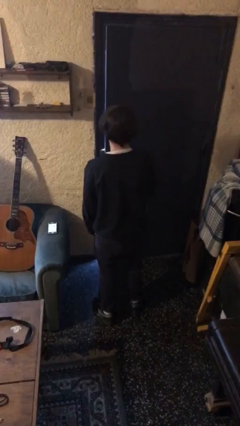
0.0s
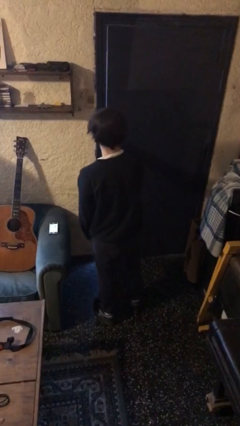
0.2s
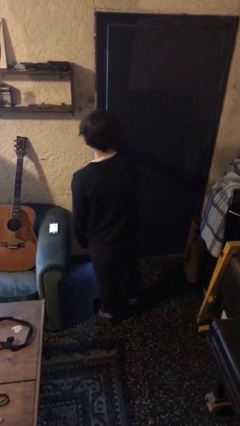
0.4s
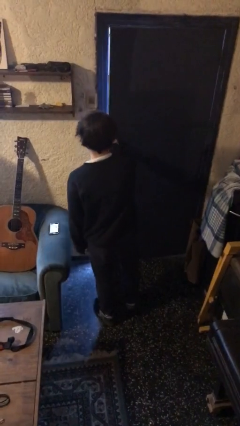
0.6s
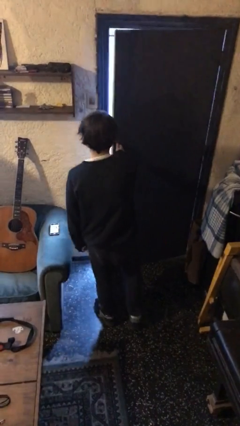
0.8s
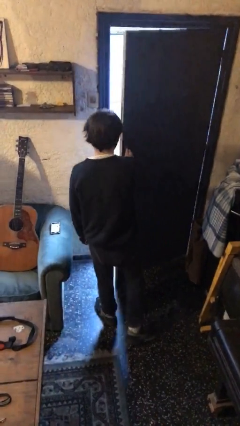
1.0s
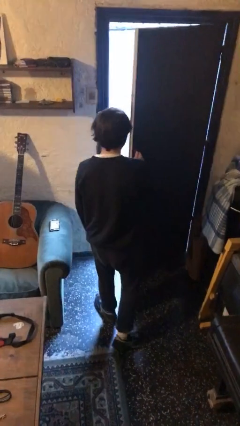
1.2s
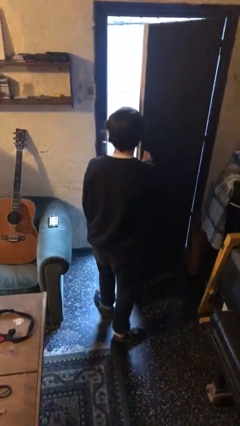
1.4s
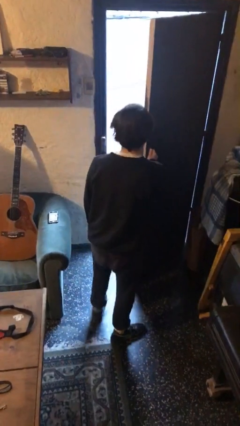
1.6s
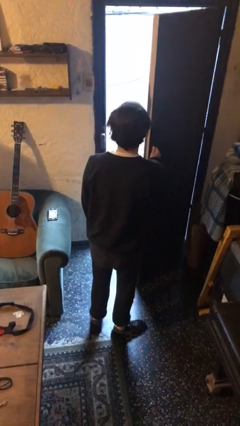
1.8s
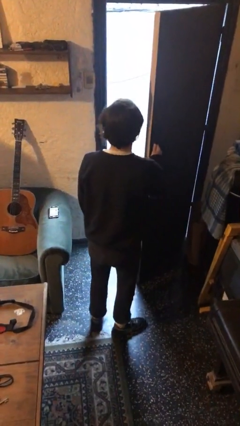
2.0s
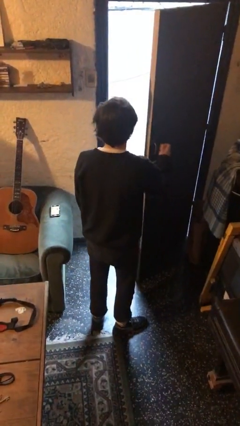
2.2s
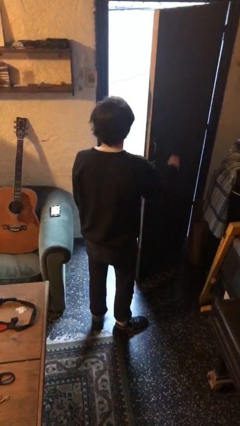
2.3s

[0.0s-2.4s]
person opens facility door

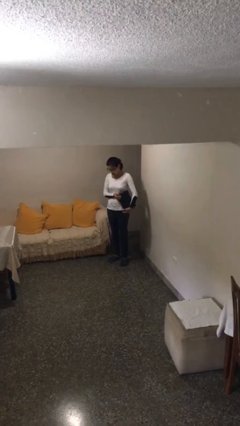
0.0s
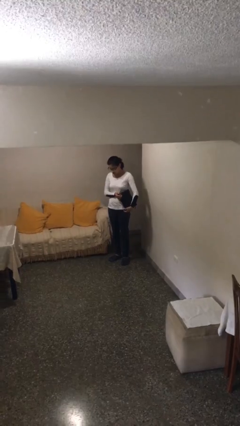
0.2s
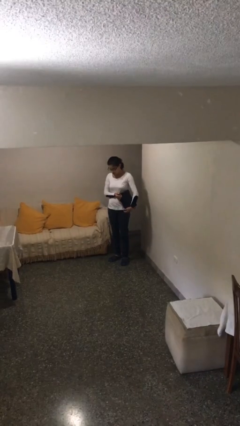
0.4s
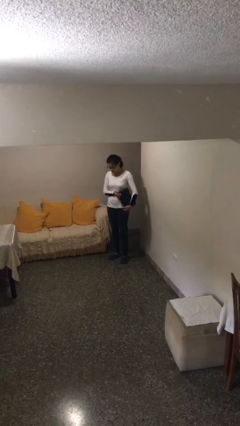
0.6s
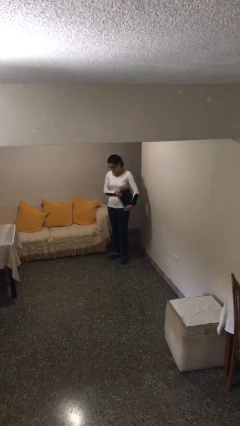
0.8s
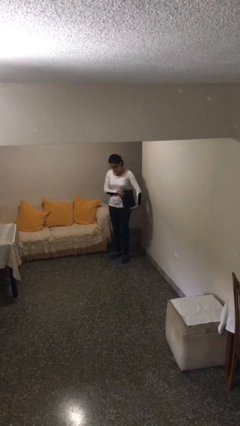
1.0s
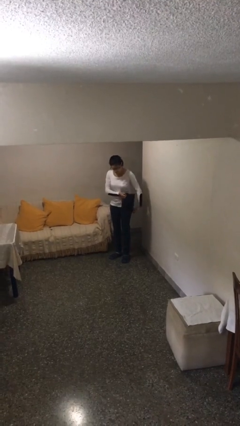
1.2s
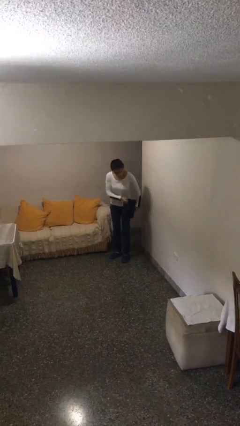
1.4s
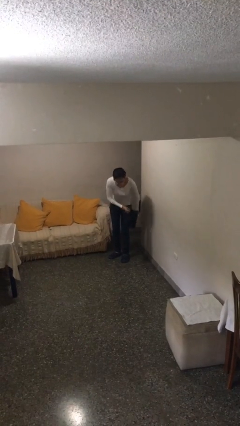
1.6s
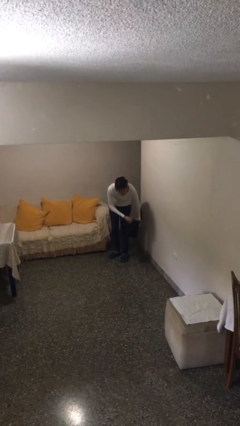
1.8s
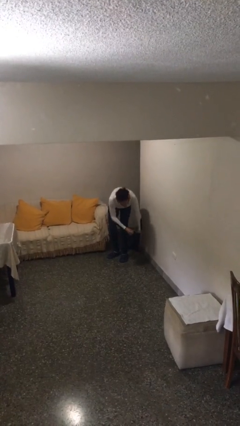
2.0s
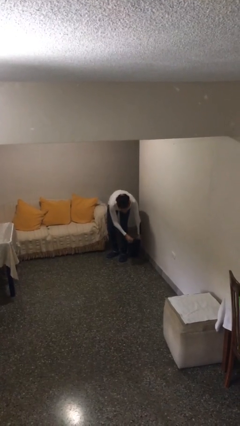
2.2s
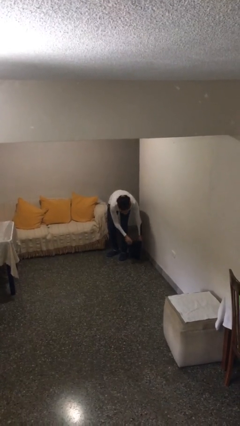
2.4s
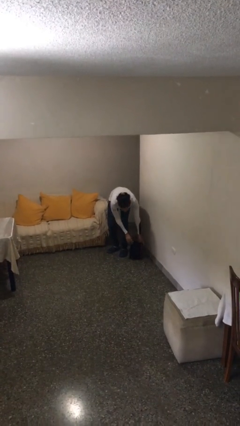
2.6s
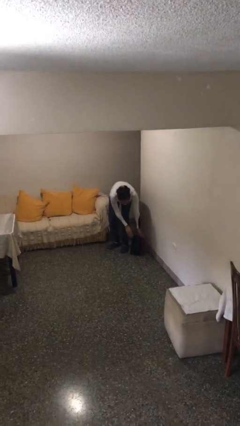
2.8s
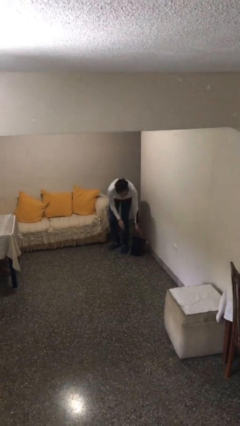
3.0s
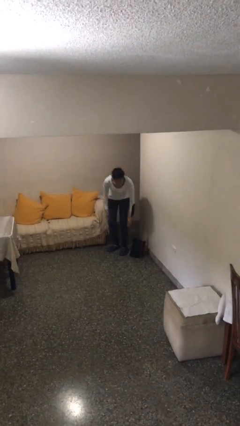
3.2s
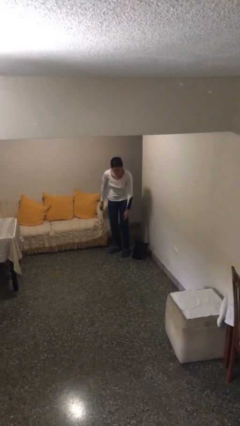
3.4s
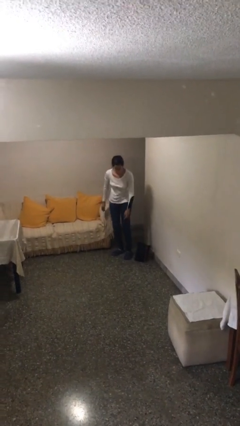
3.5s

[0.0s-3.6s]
person puts down object on floor

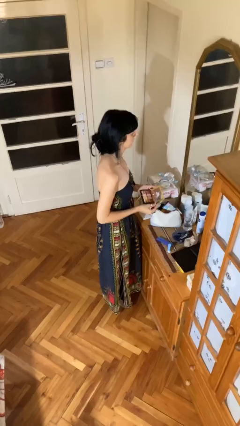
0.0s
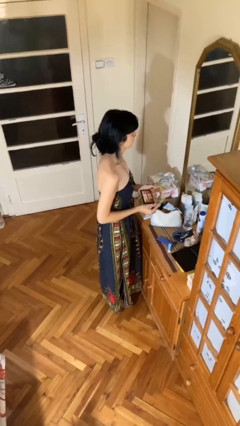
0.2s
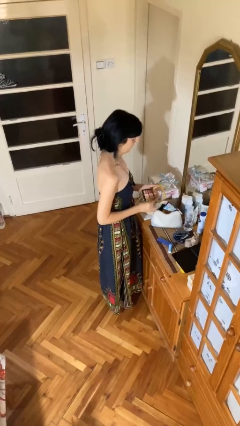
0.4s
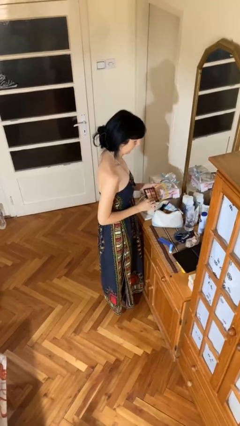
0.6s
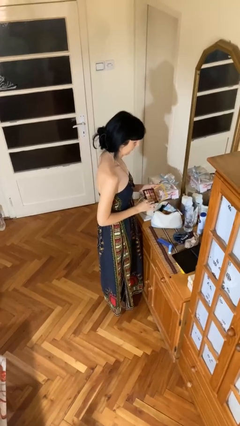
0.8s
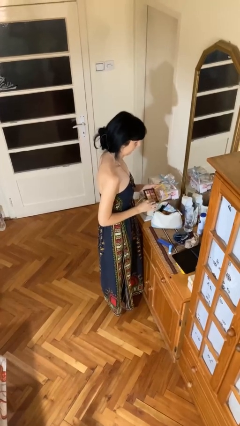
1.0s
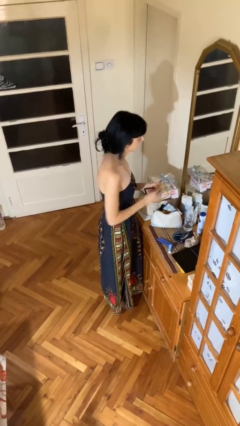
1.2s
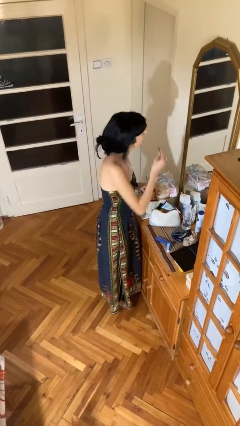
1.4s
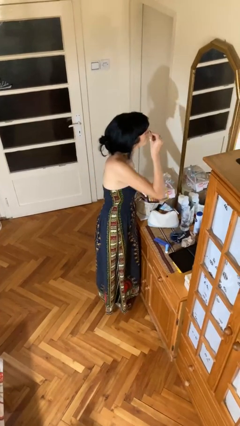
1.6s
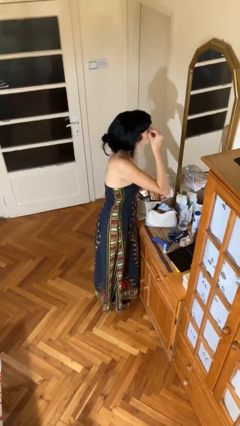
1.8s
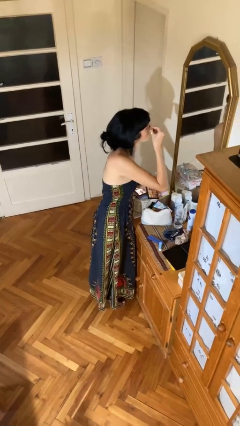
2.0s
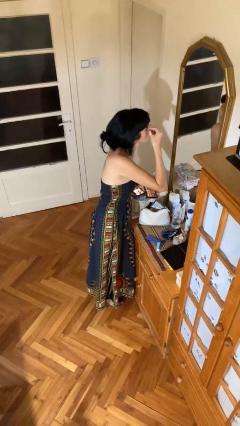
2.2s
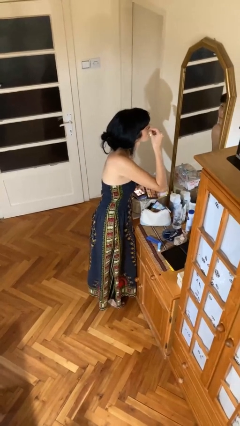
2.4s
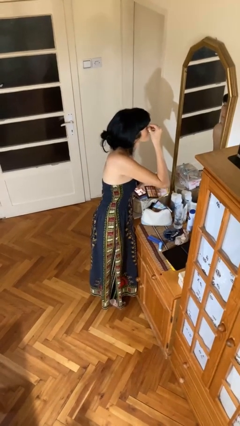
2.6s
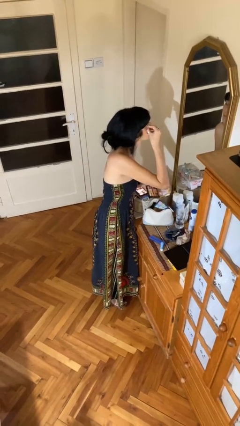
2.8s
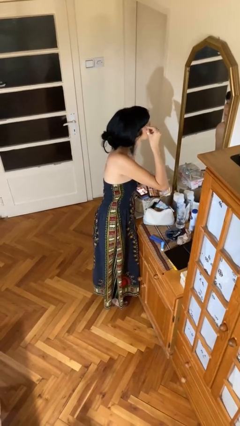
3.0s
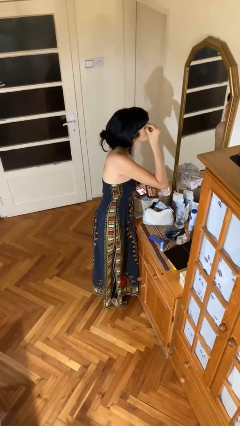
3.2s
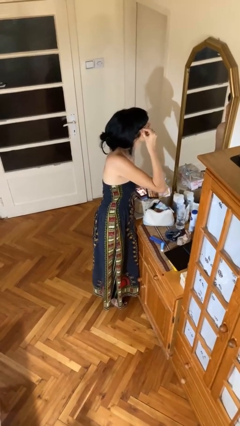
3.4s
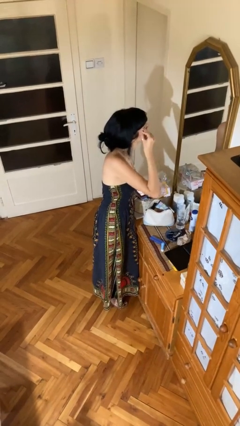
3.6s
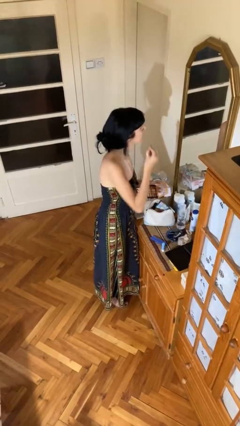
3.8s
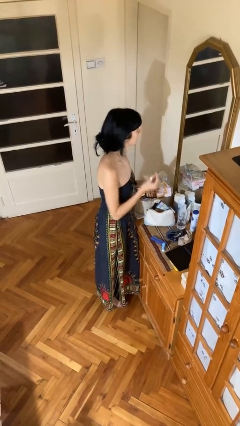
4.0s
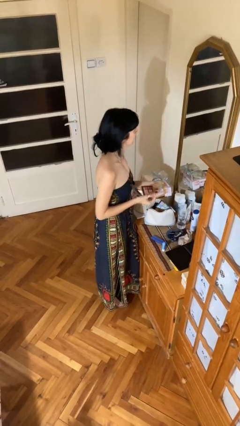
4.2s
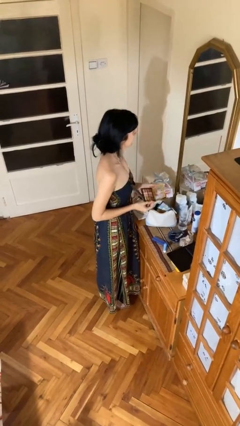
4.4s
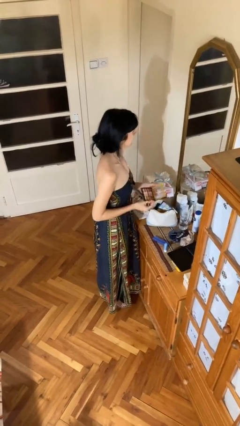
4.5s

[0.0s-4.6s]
person applies eye makeup

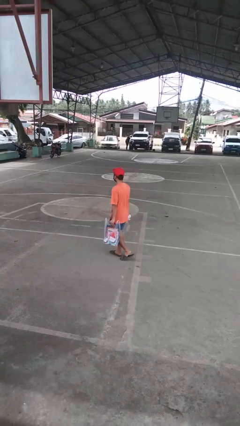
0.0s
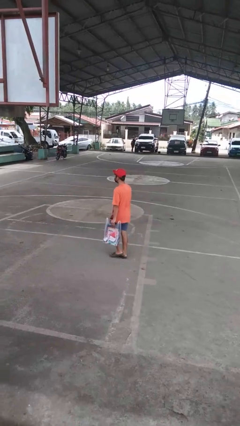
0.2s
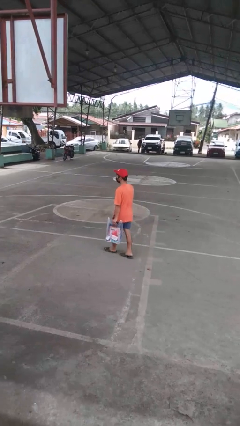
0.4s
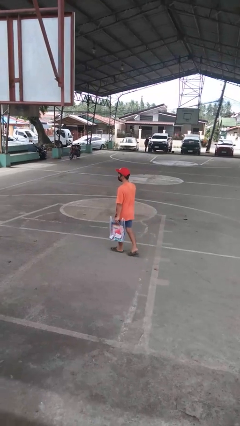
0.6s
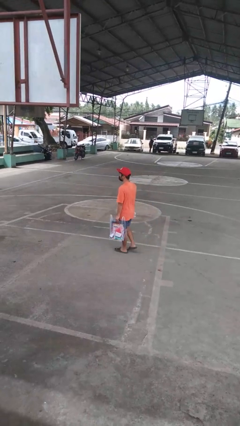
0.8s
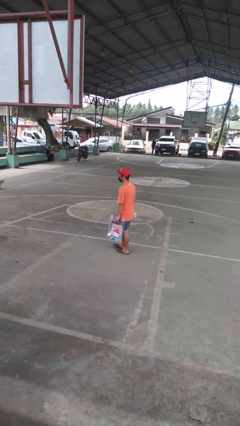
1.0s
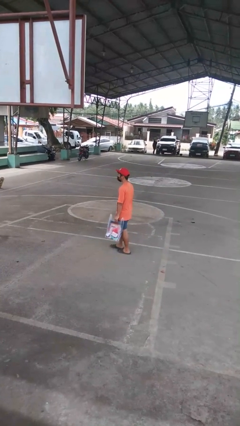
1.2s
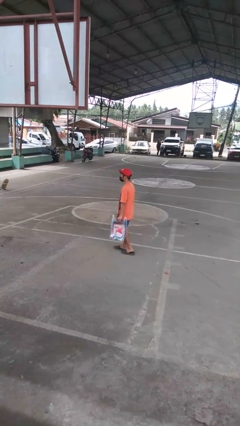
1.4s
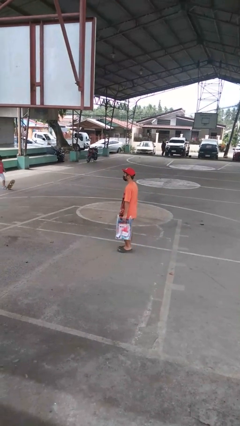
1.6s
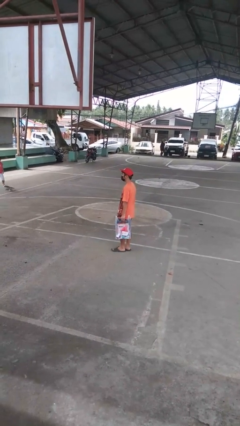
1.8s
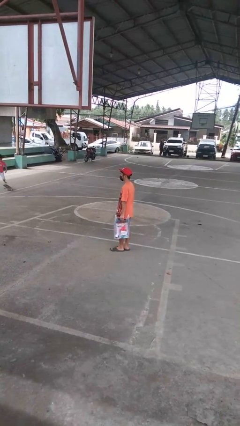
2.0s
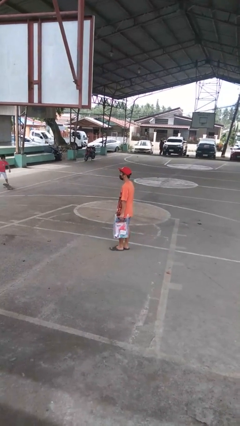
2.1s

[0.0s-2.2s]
person carries groceries

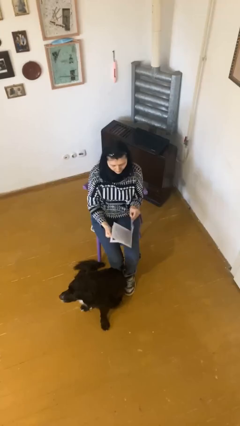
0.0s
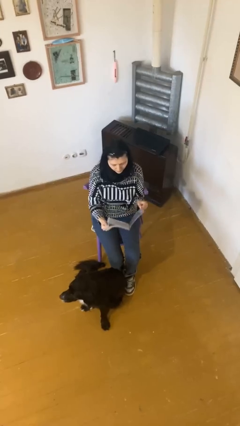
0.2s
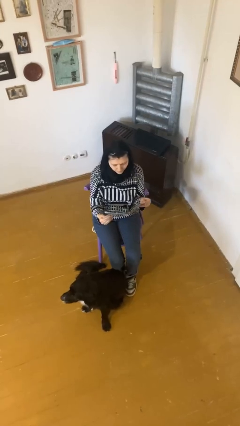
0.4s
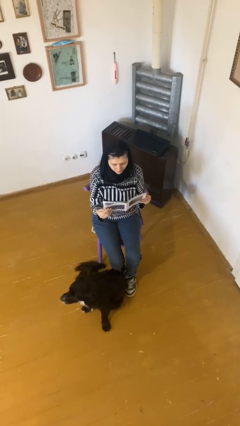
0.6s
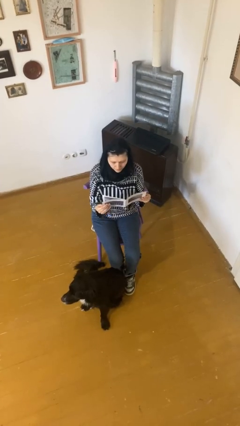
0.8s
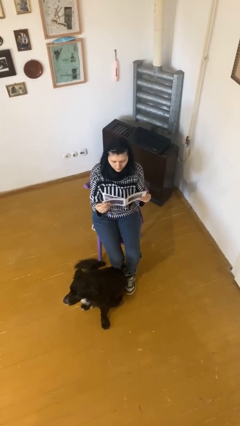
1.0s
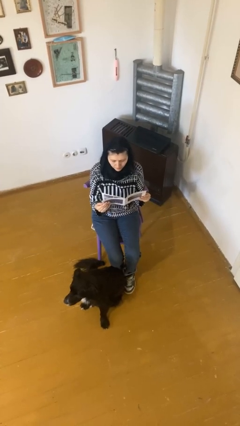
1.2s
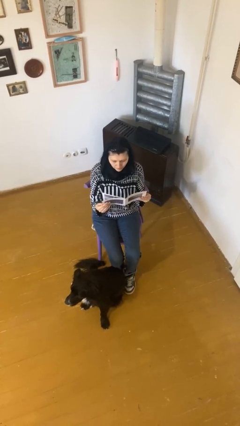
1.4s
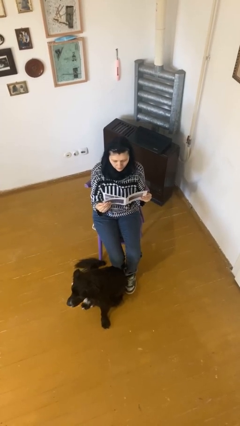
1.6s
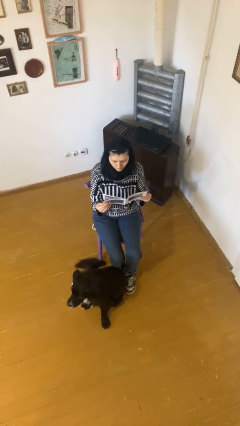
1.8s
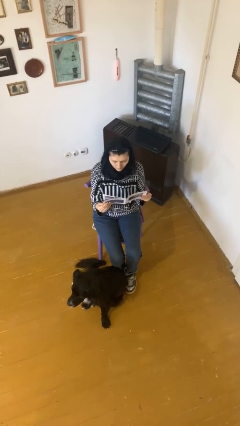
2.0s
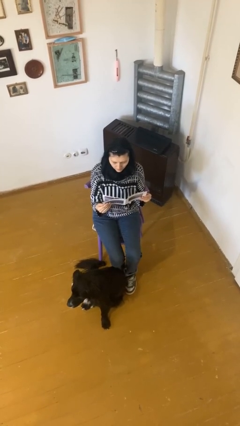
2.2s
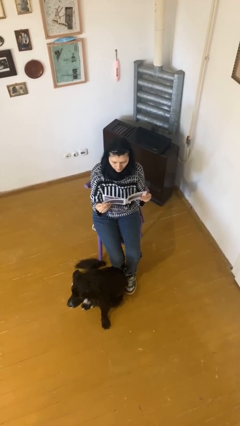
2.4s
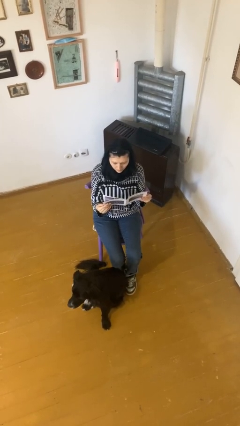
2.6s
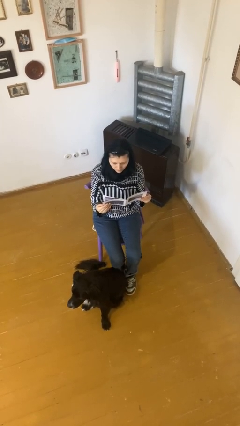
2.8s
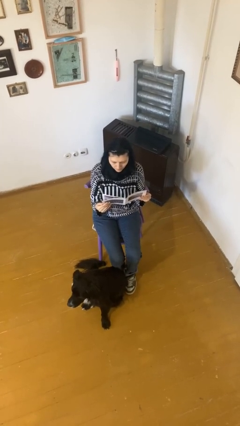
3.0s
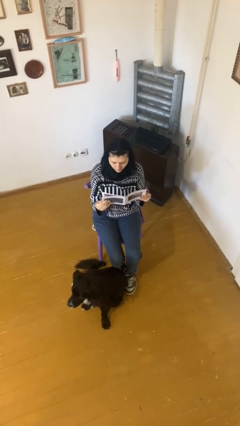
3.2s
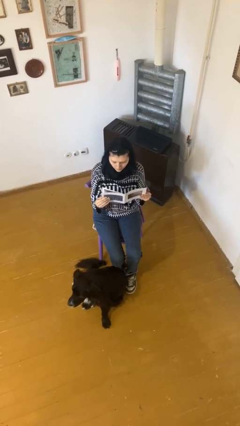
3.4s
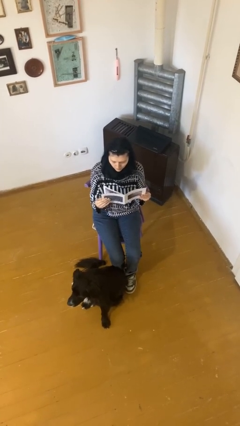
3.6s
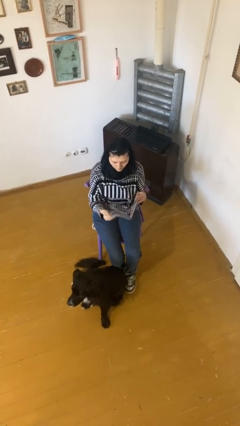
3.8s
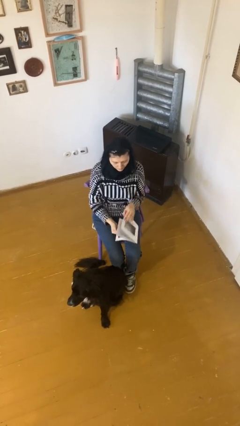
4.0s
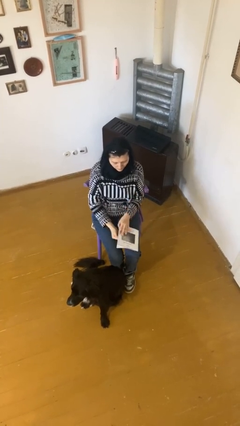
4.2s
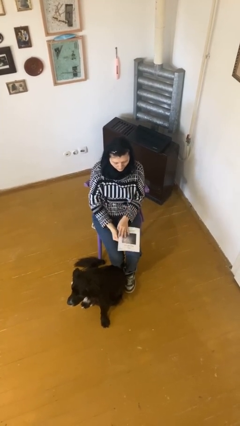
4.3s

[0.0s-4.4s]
person reads document

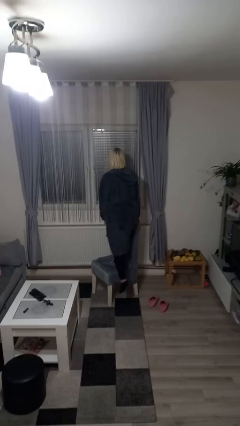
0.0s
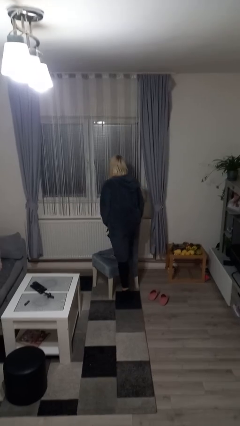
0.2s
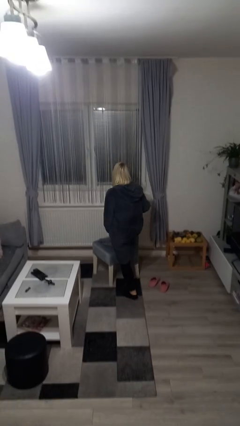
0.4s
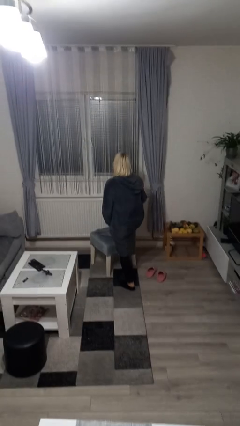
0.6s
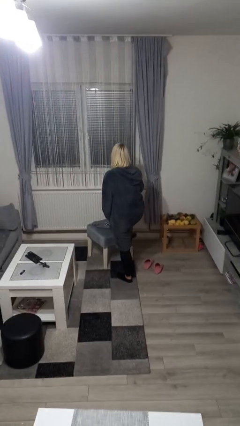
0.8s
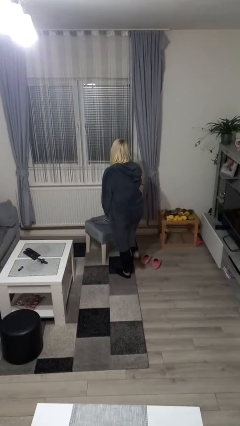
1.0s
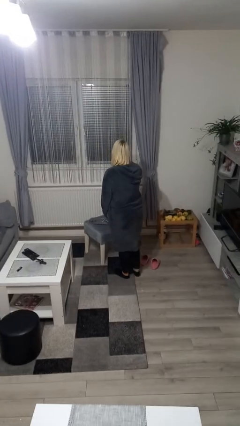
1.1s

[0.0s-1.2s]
person climbs off chair
